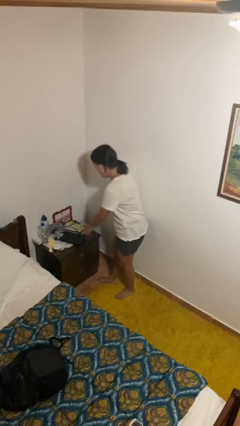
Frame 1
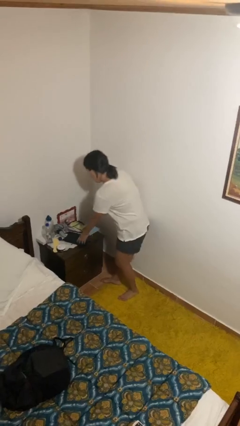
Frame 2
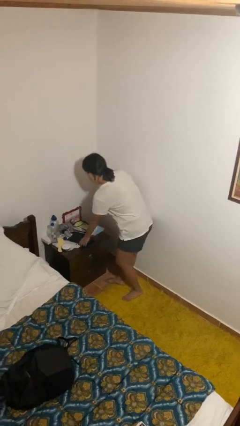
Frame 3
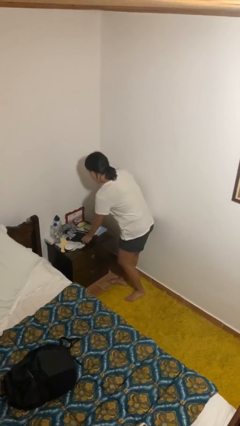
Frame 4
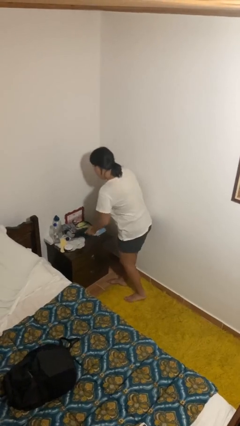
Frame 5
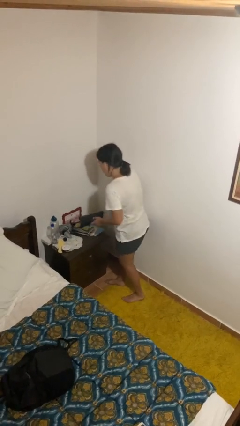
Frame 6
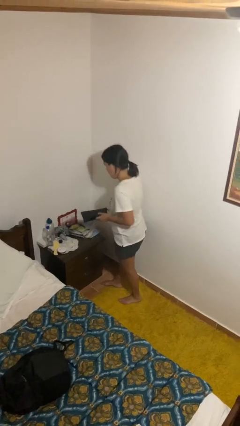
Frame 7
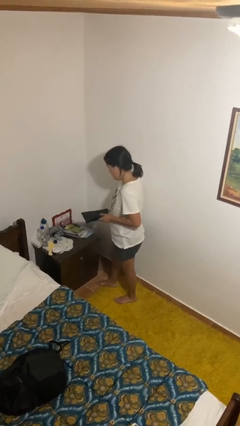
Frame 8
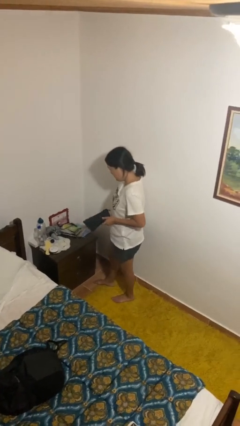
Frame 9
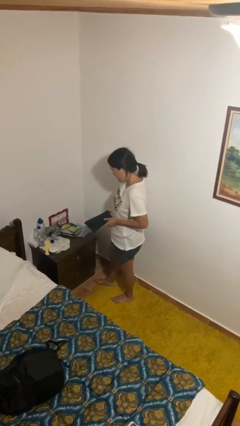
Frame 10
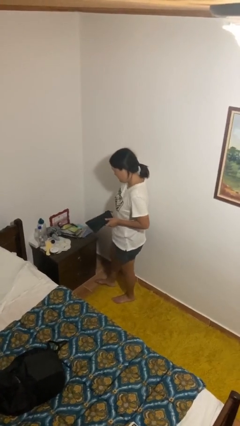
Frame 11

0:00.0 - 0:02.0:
person picks up object from countertop

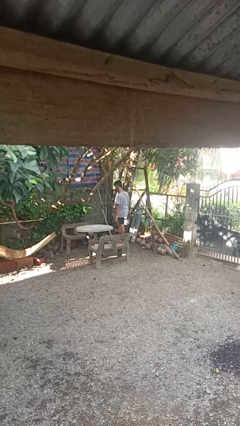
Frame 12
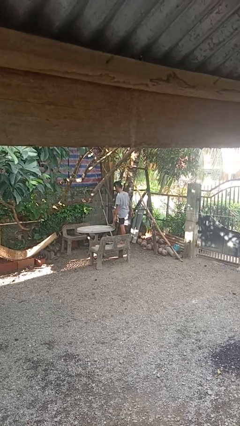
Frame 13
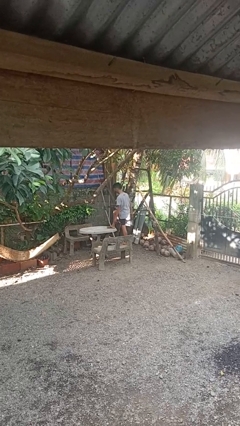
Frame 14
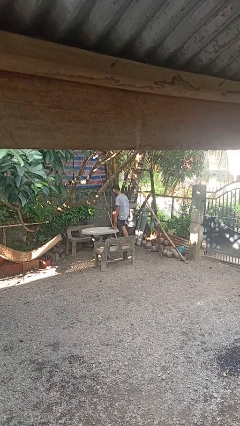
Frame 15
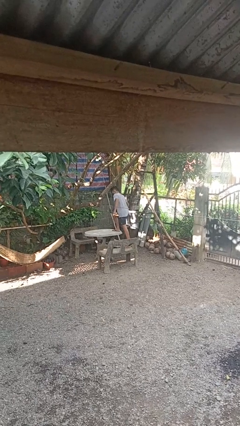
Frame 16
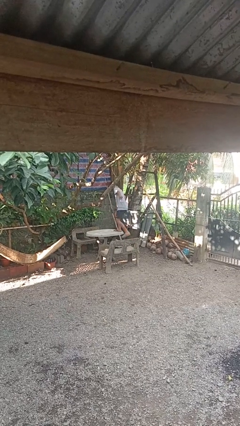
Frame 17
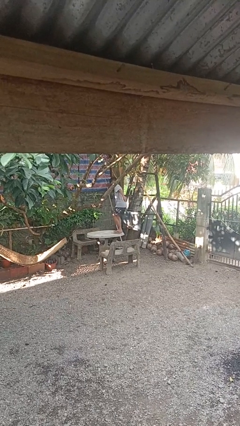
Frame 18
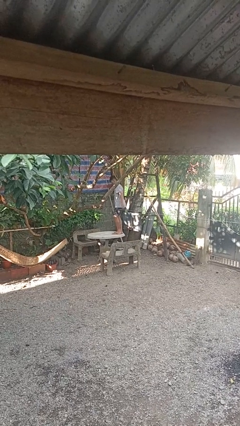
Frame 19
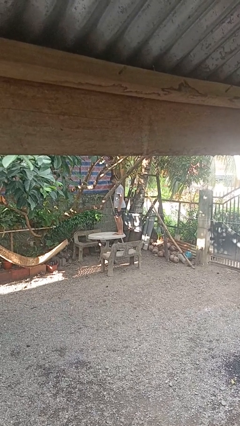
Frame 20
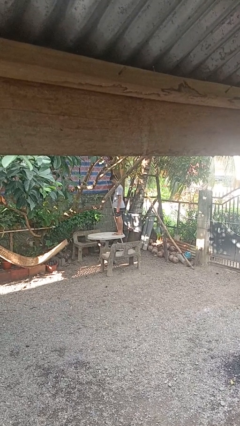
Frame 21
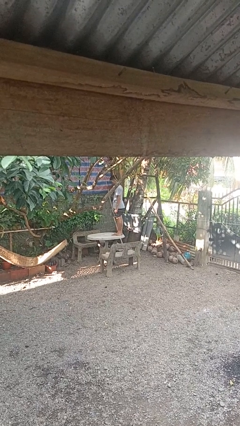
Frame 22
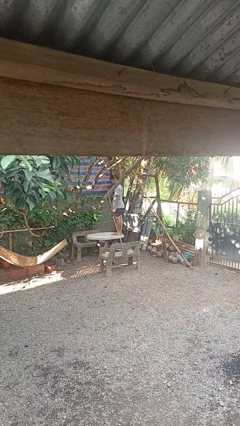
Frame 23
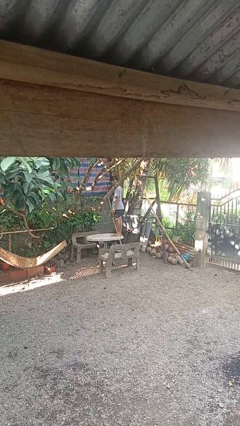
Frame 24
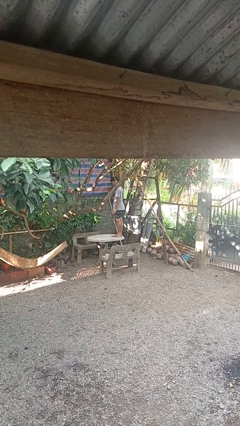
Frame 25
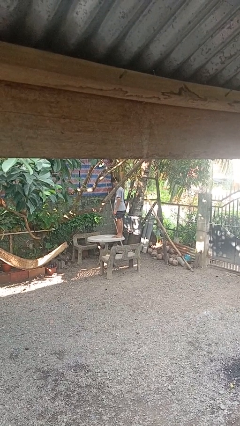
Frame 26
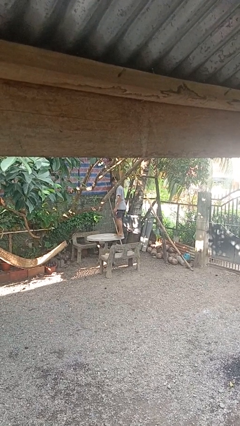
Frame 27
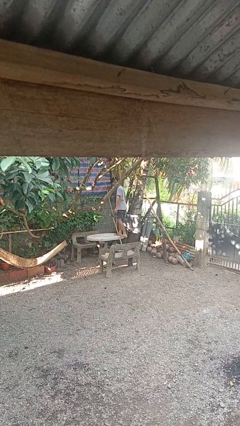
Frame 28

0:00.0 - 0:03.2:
person climbs on table

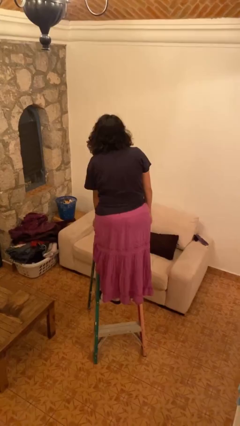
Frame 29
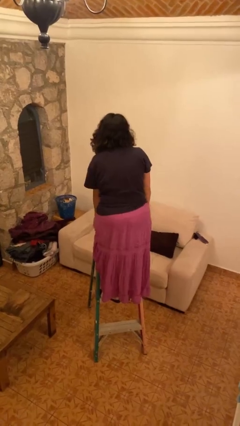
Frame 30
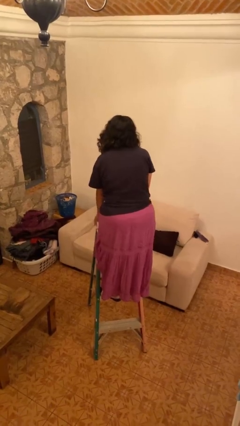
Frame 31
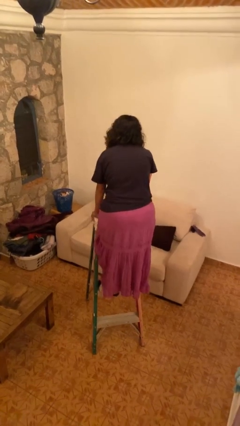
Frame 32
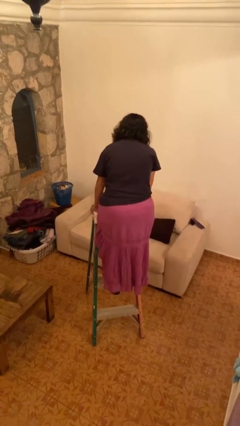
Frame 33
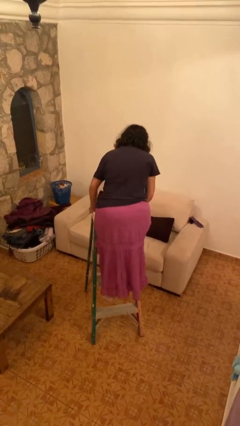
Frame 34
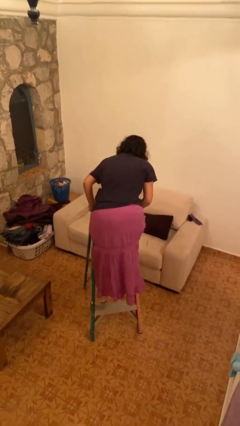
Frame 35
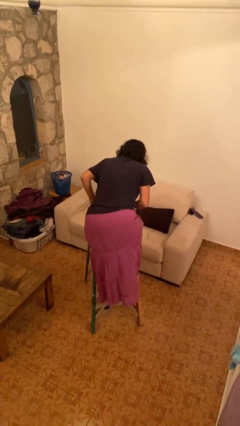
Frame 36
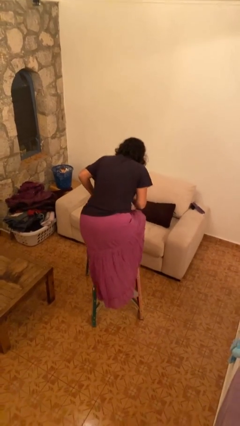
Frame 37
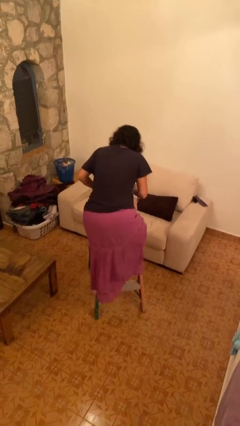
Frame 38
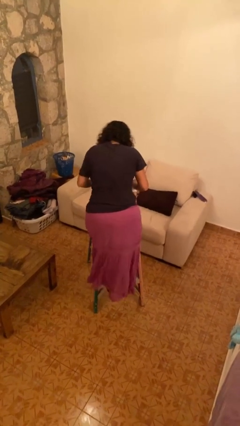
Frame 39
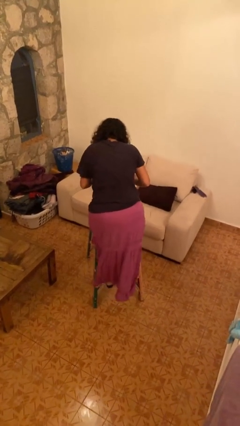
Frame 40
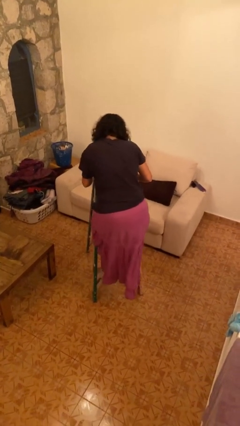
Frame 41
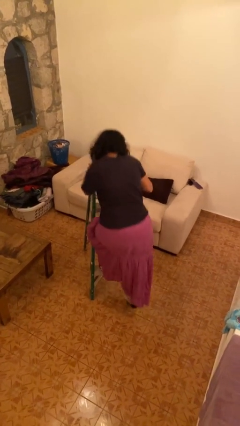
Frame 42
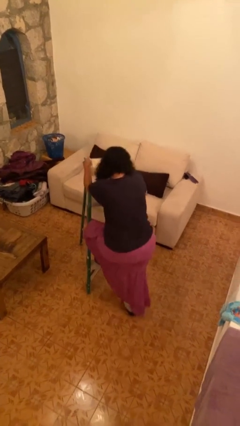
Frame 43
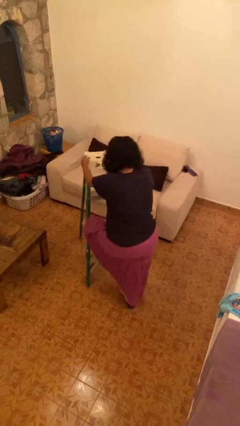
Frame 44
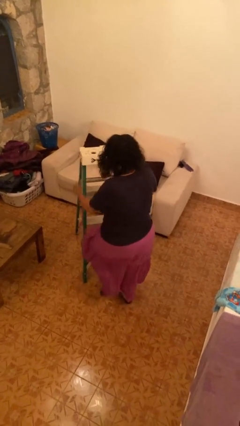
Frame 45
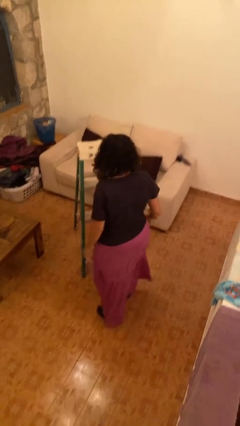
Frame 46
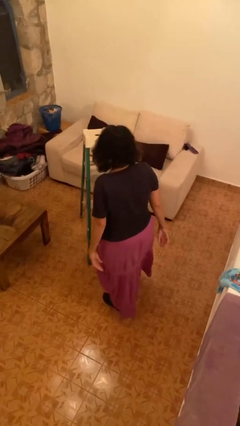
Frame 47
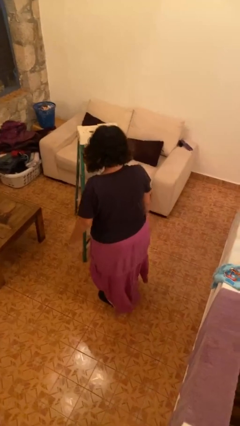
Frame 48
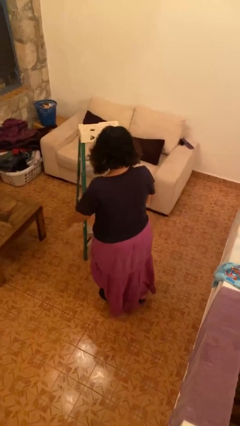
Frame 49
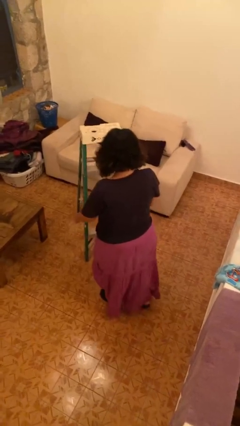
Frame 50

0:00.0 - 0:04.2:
person climbs down ladder

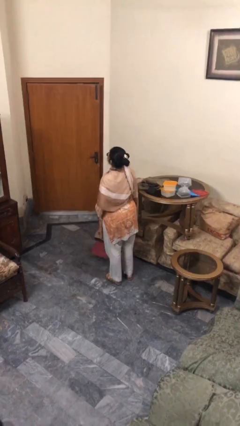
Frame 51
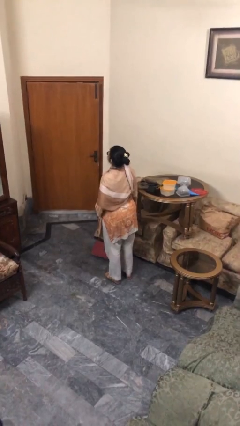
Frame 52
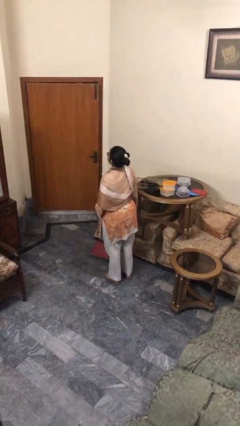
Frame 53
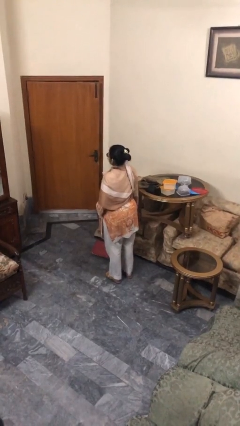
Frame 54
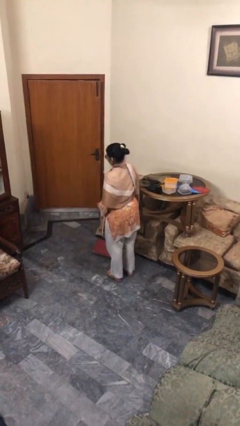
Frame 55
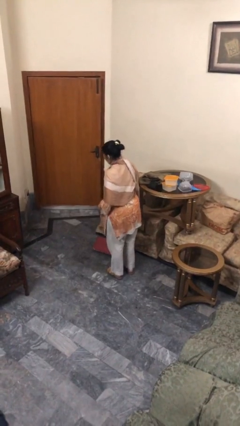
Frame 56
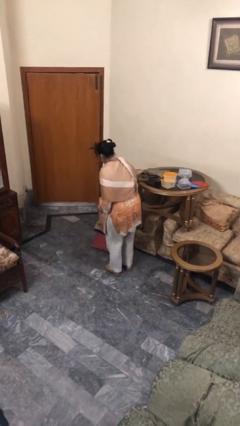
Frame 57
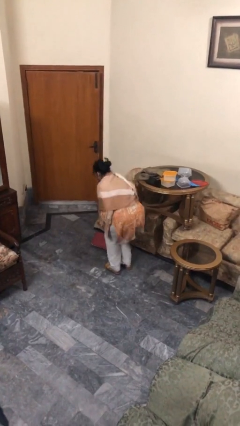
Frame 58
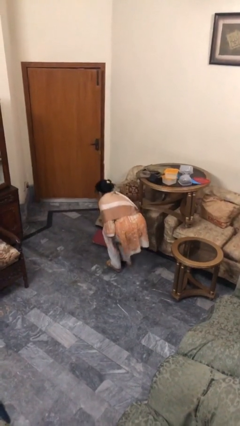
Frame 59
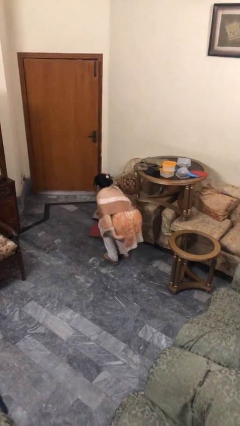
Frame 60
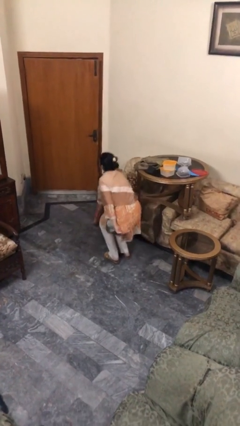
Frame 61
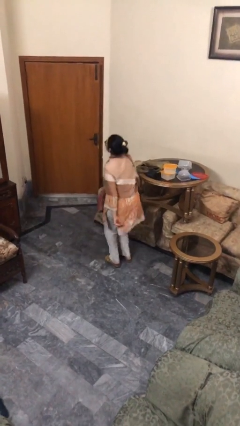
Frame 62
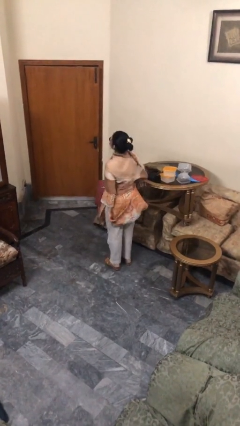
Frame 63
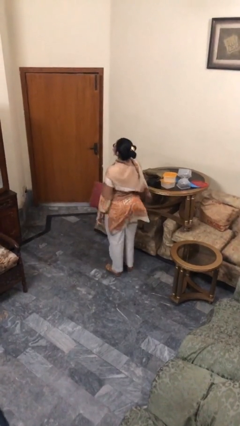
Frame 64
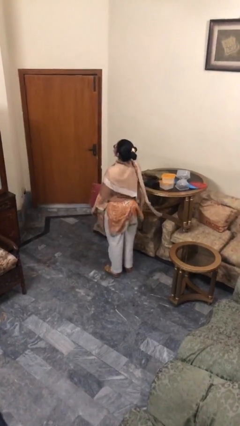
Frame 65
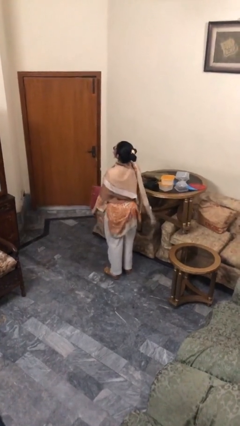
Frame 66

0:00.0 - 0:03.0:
person picks up object from floor

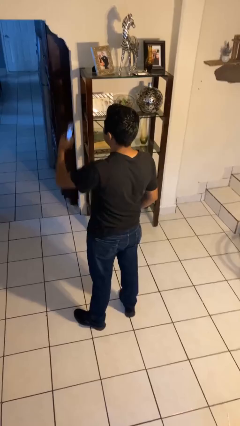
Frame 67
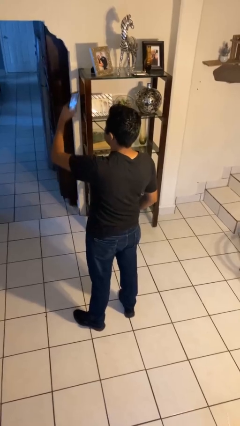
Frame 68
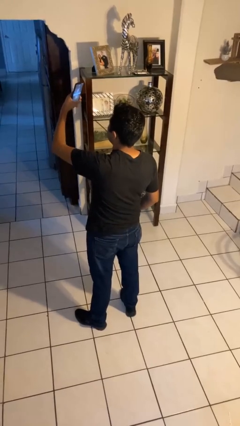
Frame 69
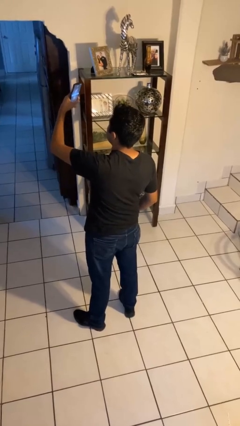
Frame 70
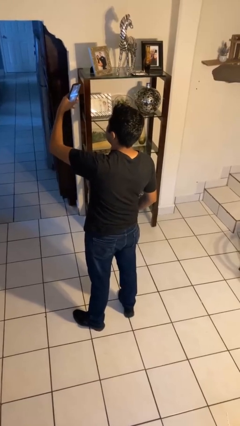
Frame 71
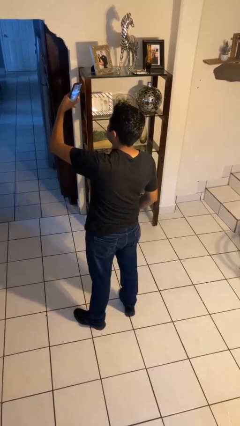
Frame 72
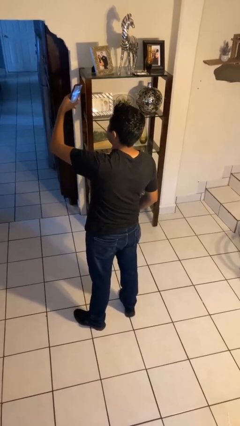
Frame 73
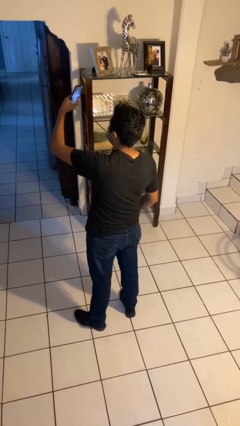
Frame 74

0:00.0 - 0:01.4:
person takes selfie

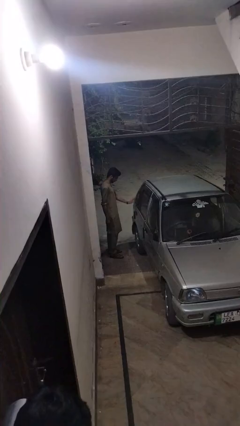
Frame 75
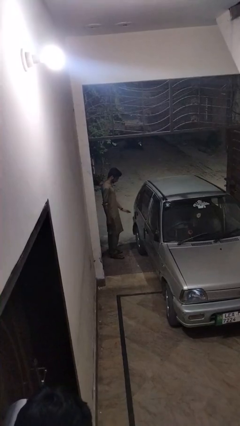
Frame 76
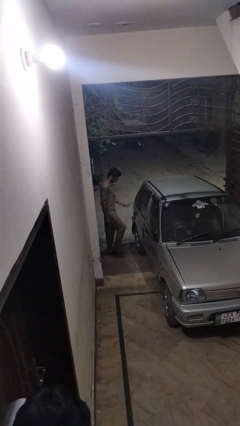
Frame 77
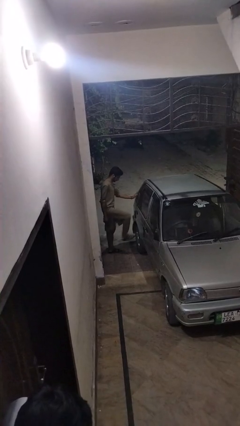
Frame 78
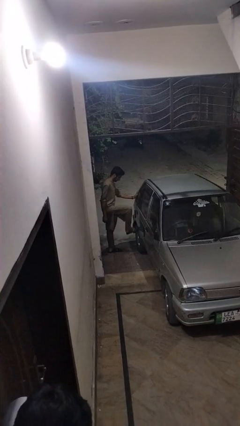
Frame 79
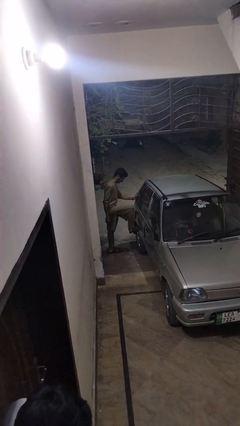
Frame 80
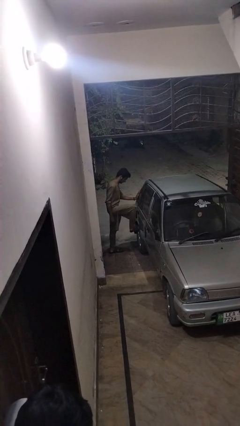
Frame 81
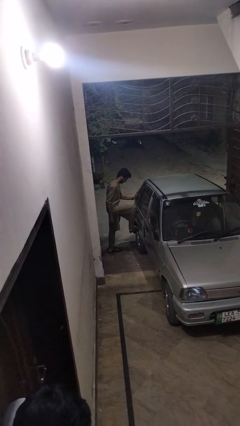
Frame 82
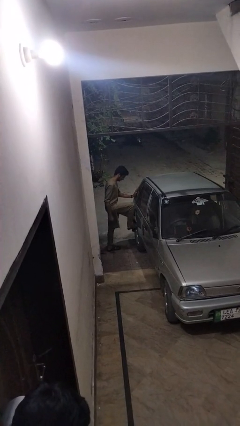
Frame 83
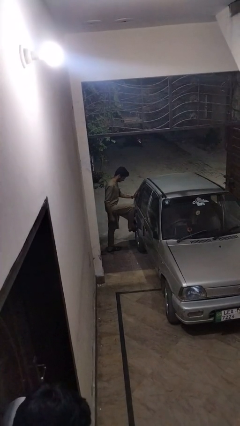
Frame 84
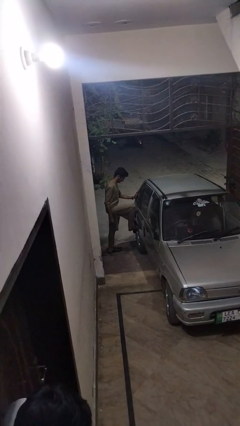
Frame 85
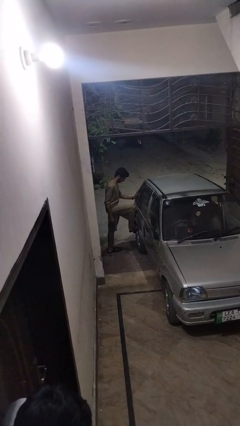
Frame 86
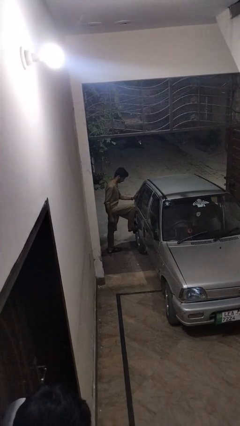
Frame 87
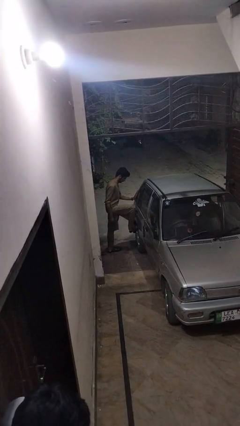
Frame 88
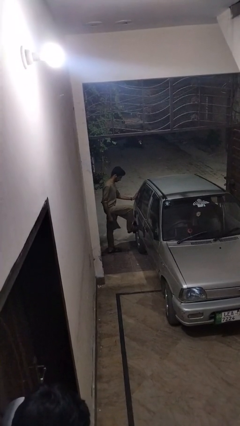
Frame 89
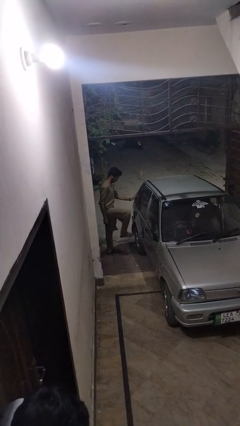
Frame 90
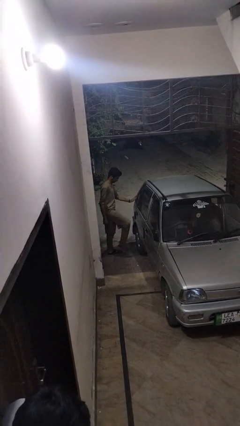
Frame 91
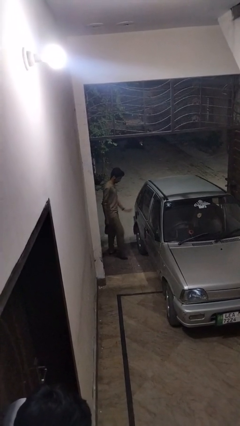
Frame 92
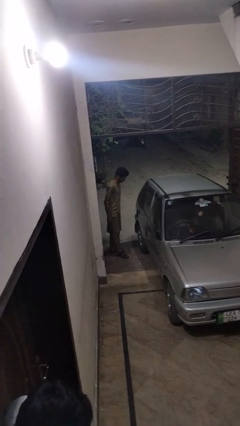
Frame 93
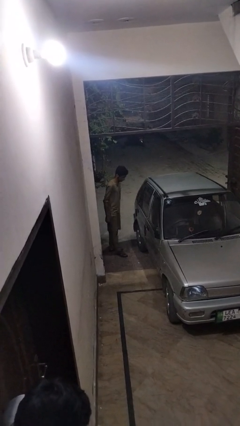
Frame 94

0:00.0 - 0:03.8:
person kicks car tires
